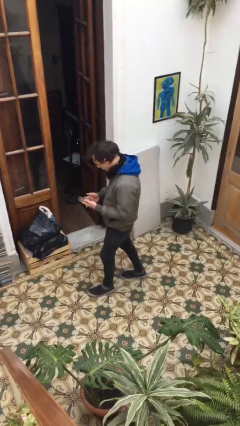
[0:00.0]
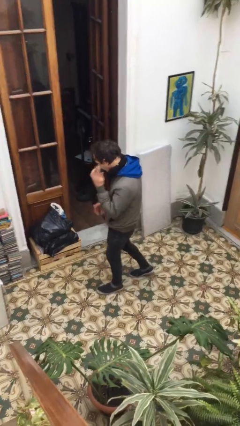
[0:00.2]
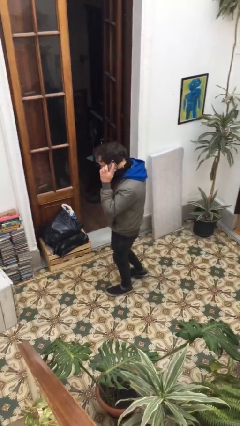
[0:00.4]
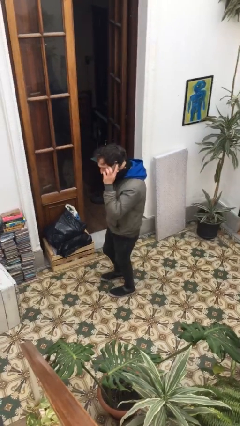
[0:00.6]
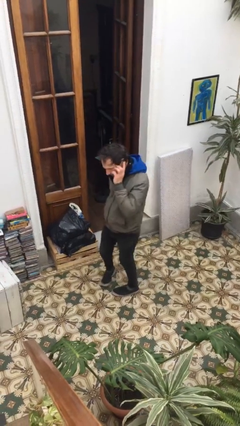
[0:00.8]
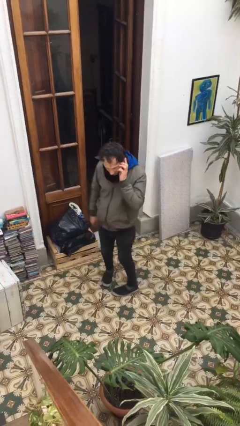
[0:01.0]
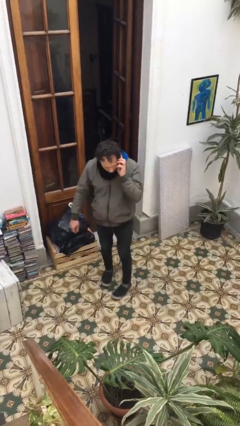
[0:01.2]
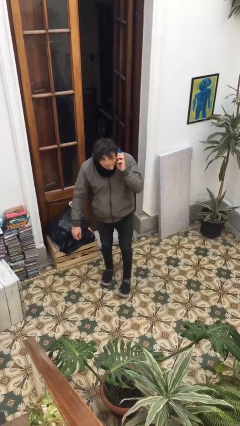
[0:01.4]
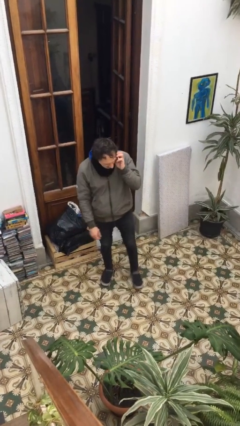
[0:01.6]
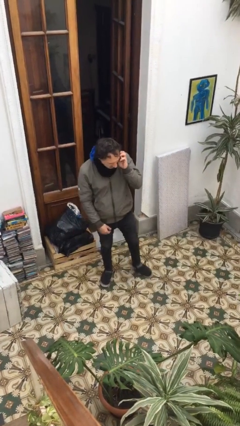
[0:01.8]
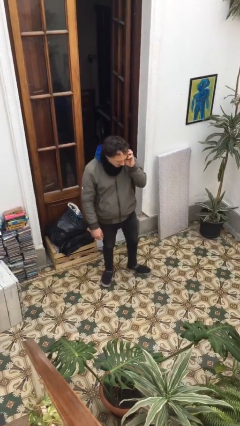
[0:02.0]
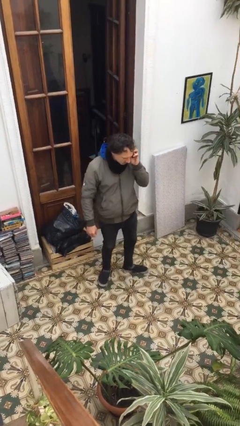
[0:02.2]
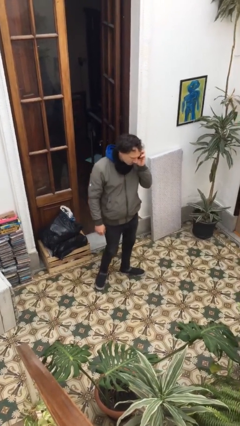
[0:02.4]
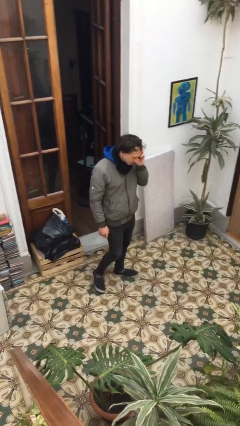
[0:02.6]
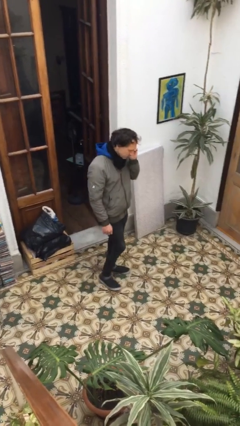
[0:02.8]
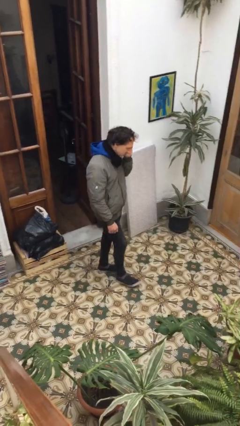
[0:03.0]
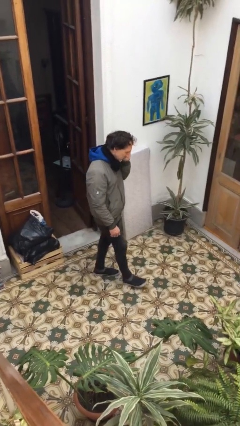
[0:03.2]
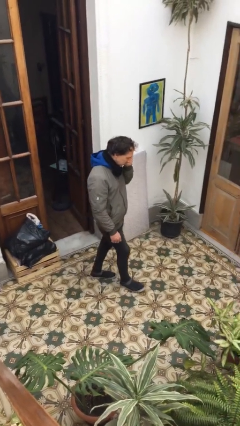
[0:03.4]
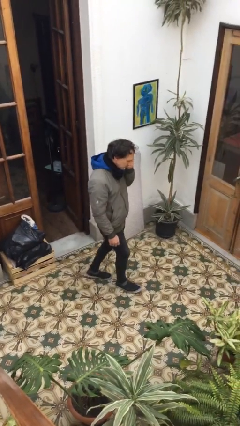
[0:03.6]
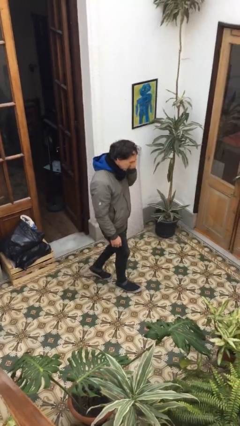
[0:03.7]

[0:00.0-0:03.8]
person talks on phone

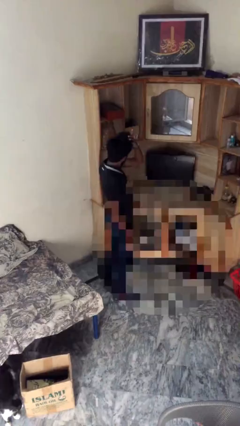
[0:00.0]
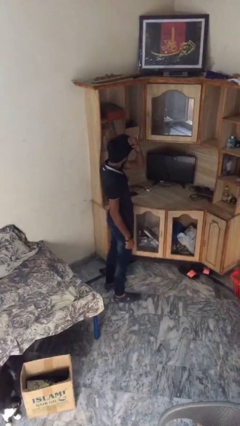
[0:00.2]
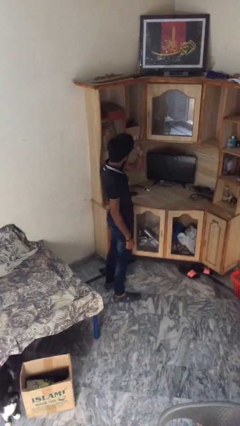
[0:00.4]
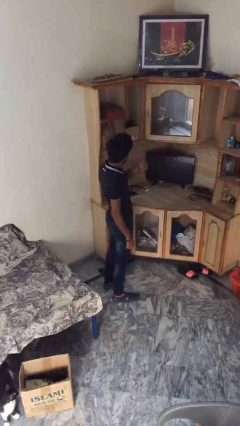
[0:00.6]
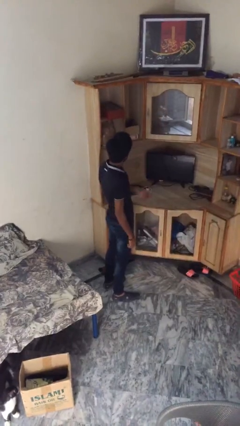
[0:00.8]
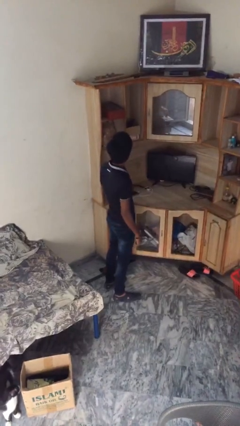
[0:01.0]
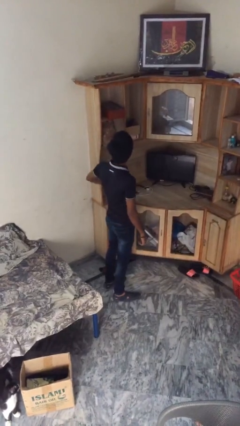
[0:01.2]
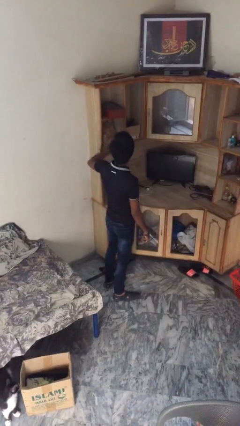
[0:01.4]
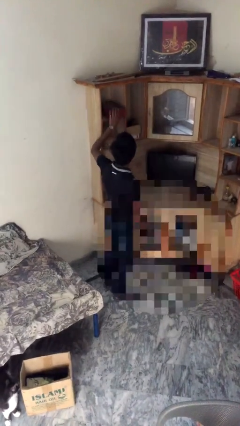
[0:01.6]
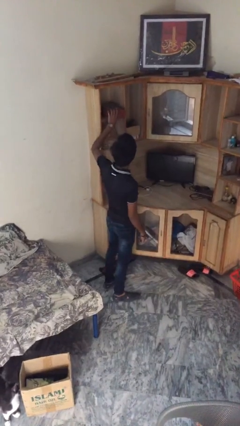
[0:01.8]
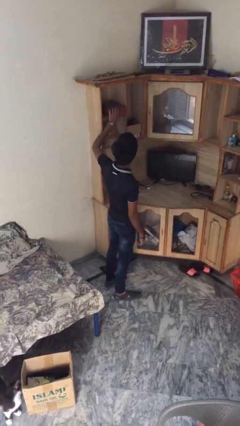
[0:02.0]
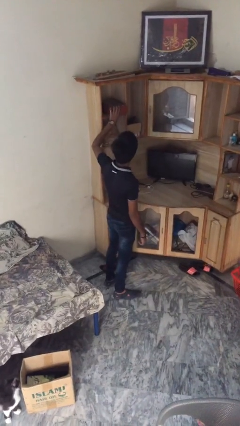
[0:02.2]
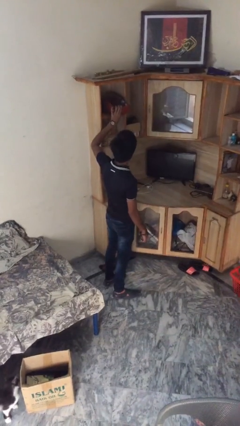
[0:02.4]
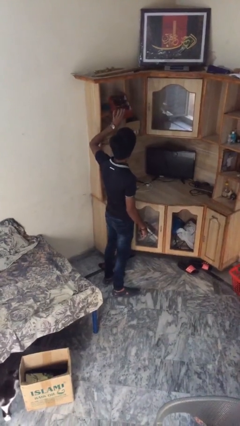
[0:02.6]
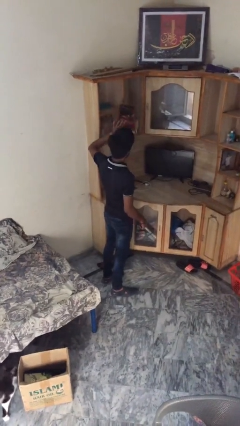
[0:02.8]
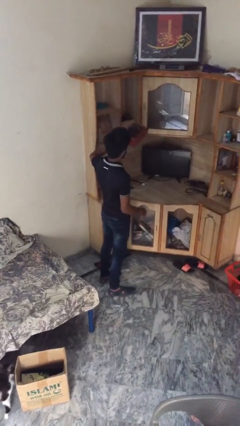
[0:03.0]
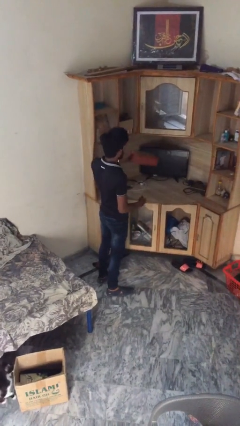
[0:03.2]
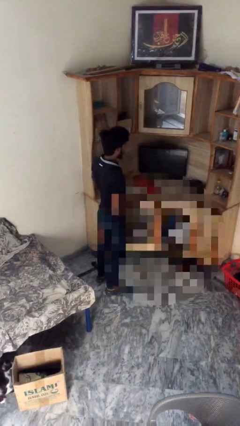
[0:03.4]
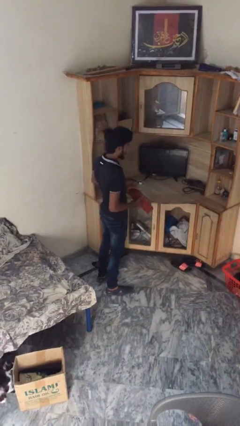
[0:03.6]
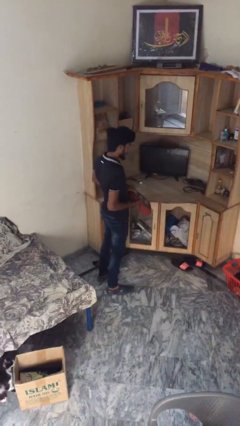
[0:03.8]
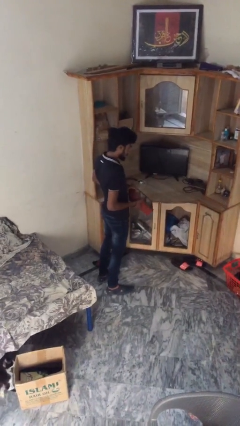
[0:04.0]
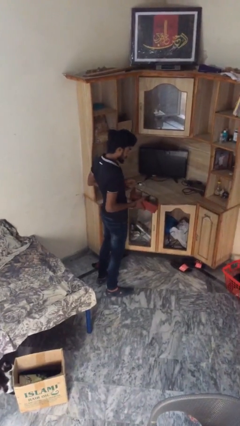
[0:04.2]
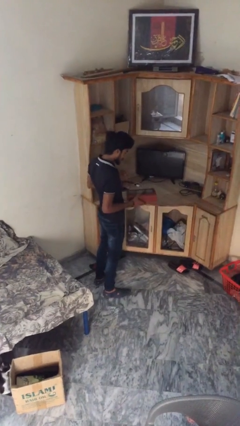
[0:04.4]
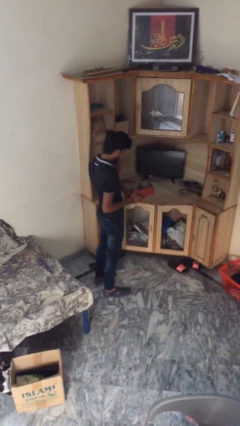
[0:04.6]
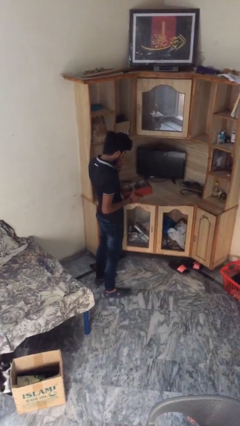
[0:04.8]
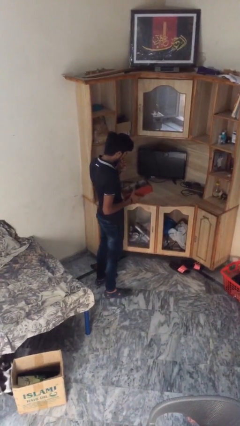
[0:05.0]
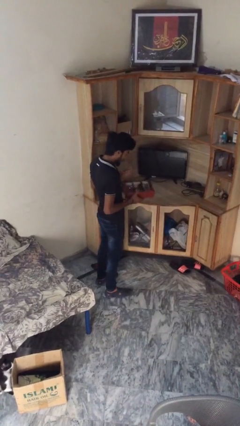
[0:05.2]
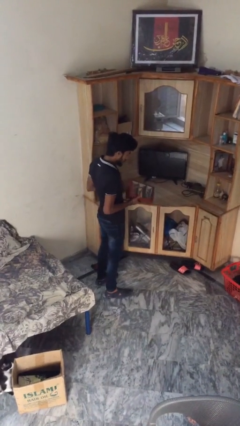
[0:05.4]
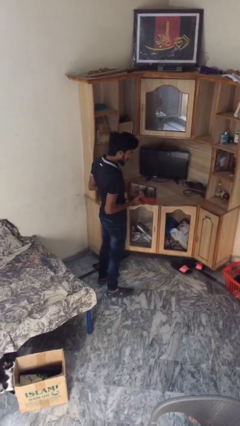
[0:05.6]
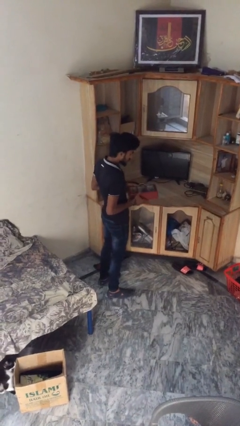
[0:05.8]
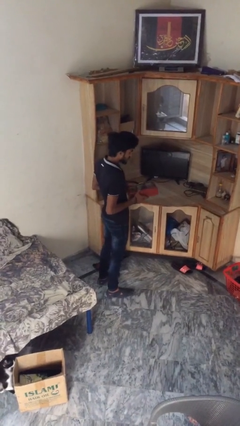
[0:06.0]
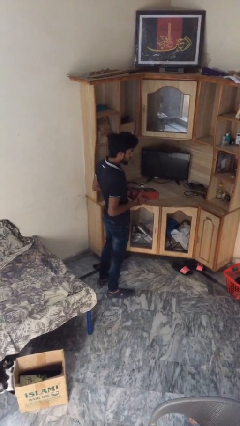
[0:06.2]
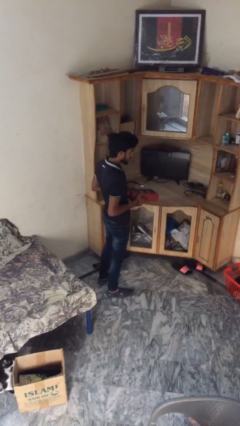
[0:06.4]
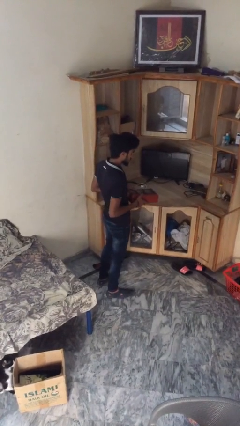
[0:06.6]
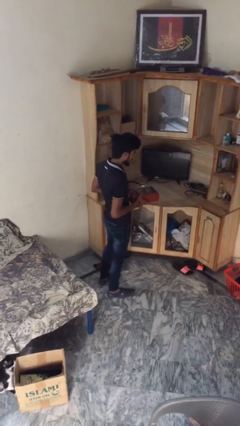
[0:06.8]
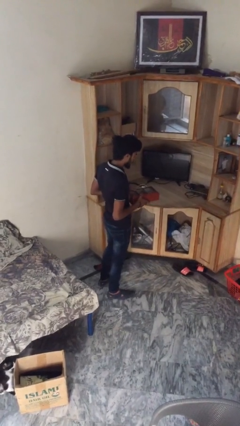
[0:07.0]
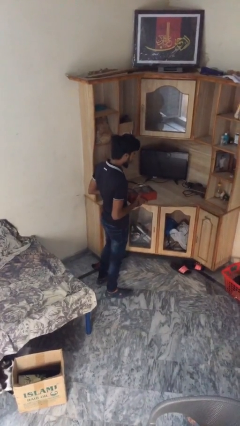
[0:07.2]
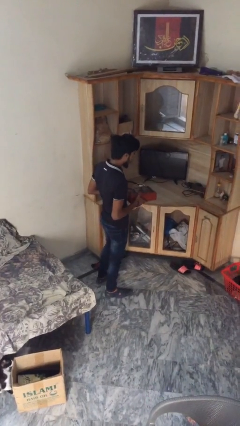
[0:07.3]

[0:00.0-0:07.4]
person picks up object from shelf

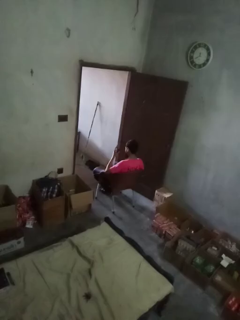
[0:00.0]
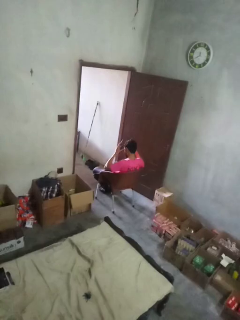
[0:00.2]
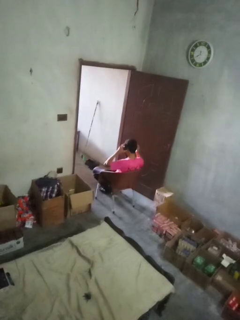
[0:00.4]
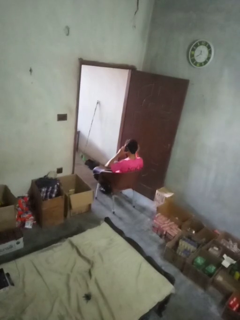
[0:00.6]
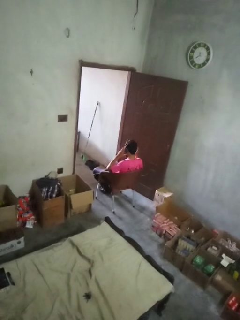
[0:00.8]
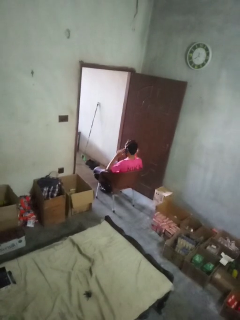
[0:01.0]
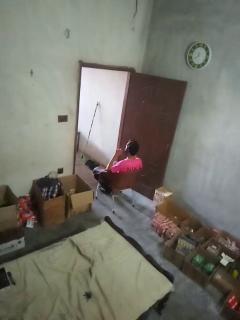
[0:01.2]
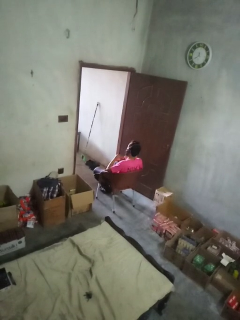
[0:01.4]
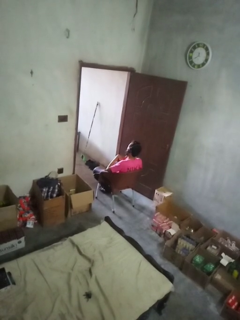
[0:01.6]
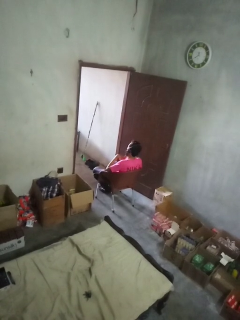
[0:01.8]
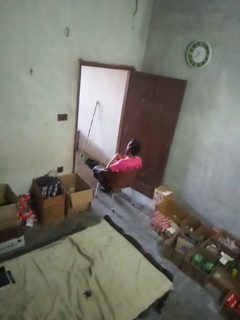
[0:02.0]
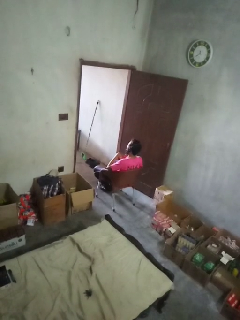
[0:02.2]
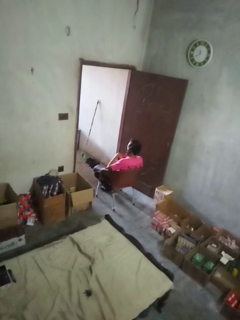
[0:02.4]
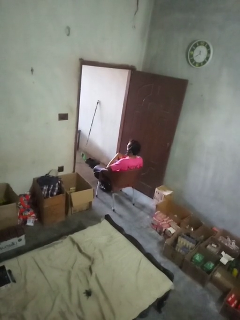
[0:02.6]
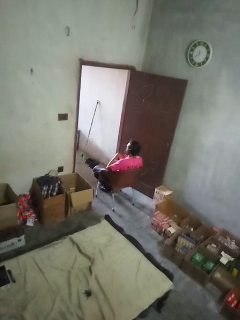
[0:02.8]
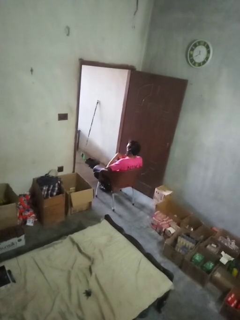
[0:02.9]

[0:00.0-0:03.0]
person puts on headphones

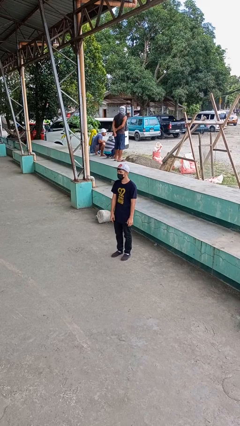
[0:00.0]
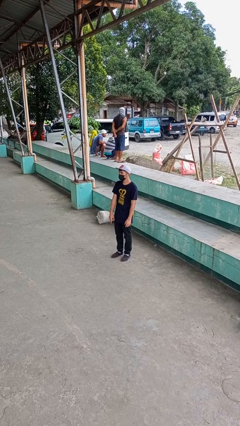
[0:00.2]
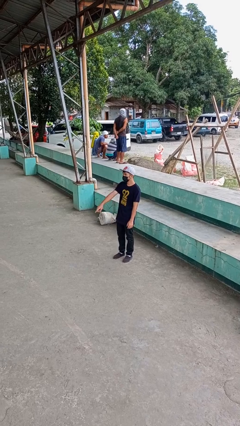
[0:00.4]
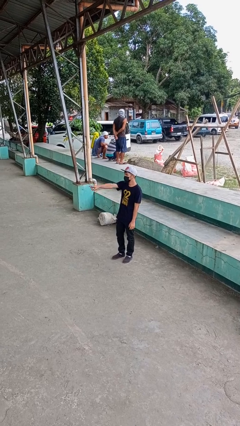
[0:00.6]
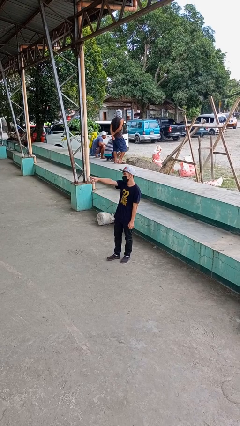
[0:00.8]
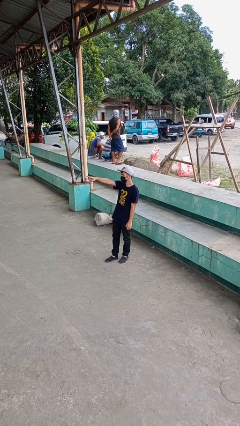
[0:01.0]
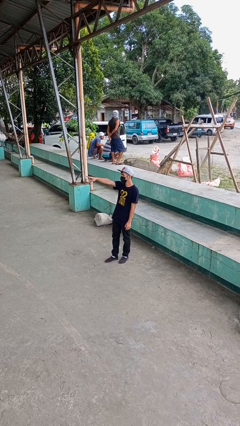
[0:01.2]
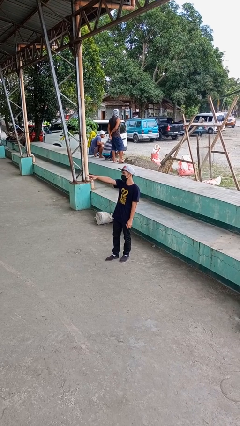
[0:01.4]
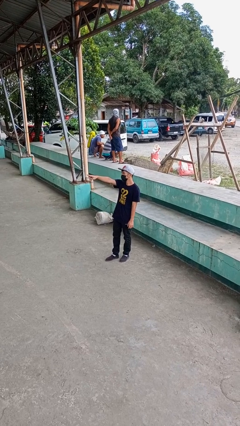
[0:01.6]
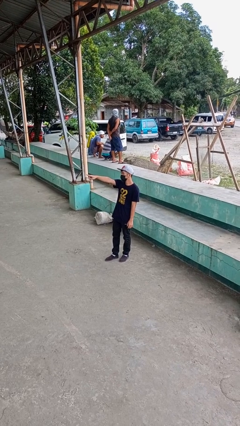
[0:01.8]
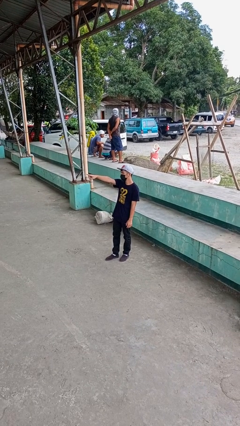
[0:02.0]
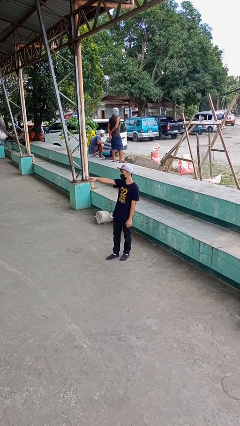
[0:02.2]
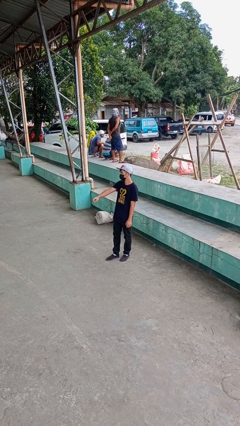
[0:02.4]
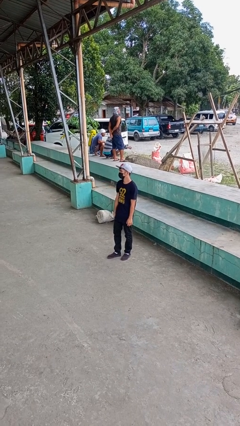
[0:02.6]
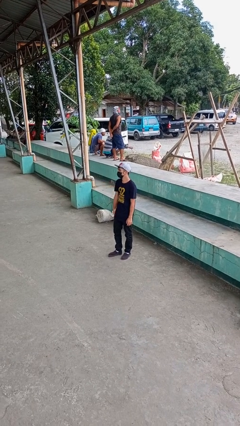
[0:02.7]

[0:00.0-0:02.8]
person points at person

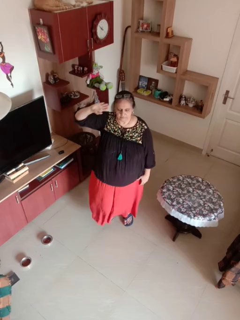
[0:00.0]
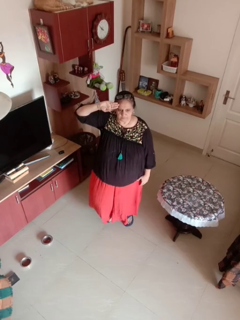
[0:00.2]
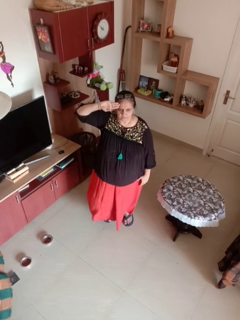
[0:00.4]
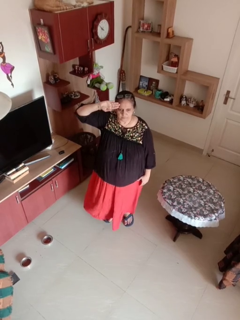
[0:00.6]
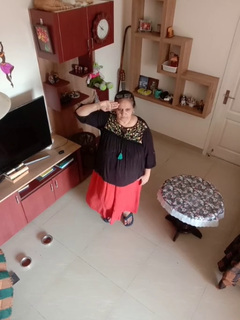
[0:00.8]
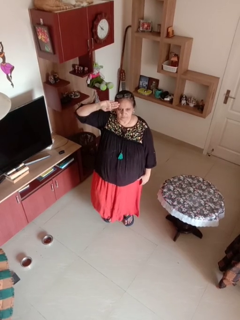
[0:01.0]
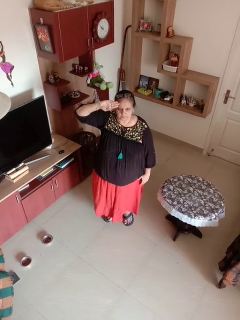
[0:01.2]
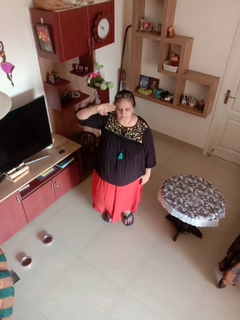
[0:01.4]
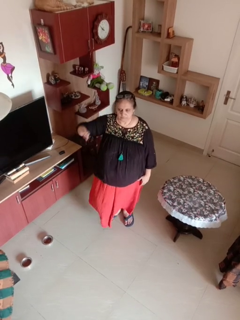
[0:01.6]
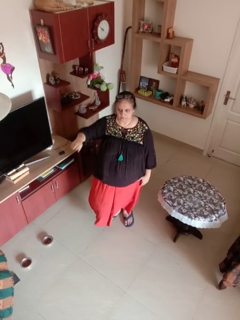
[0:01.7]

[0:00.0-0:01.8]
person salutes
